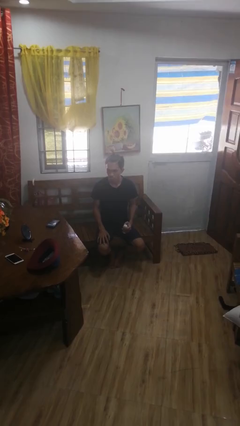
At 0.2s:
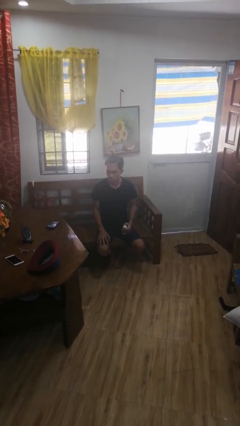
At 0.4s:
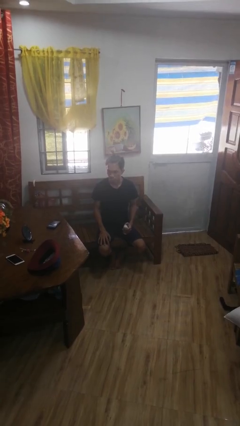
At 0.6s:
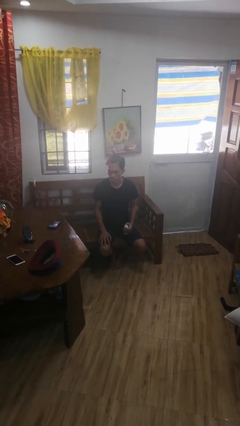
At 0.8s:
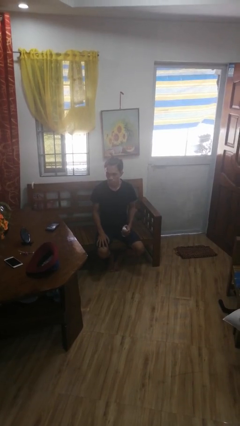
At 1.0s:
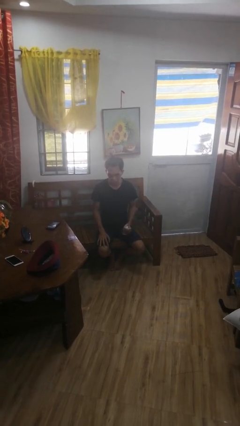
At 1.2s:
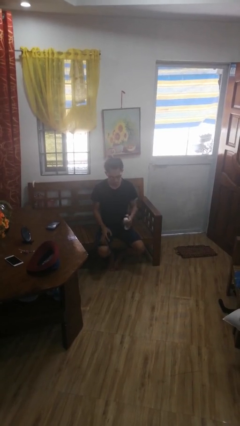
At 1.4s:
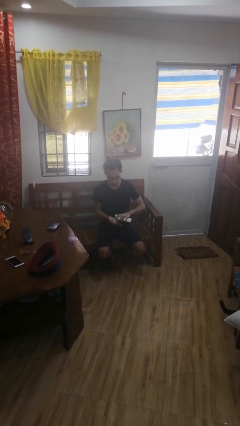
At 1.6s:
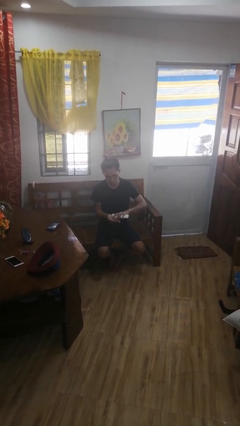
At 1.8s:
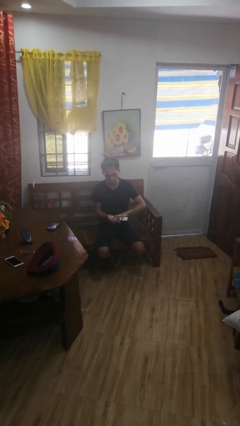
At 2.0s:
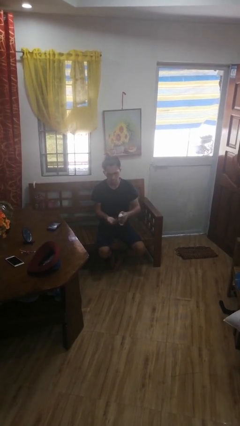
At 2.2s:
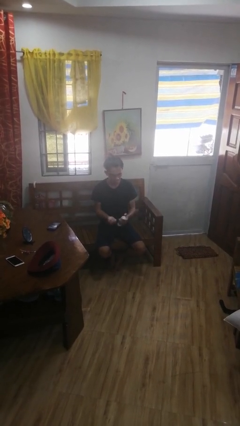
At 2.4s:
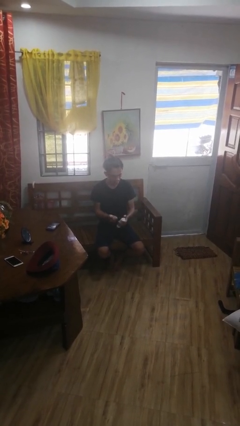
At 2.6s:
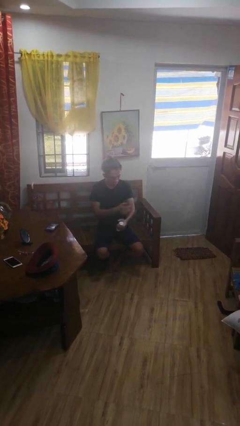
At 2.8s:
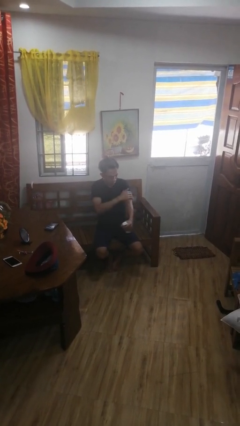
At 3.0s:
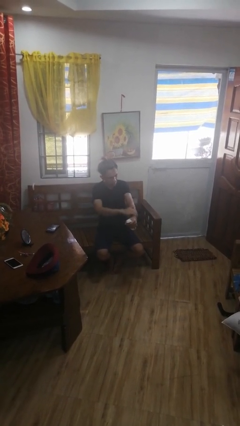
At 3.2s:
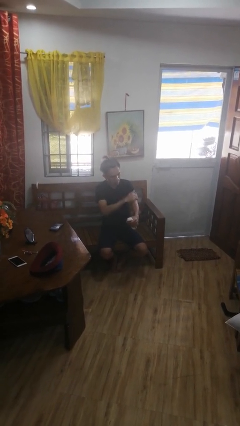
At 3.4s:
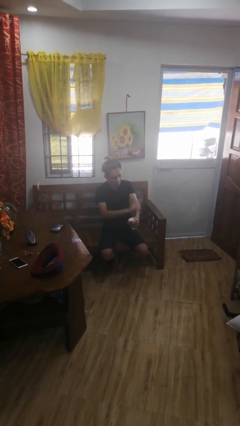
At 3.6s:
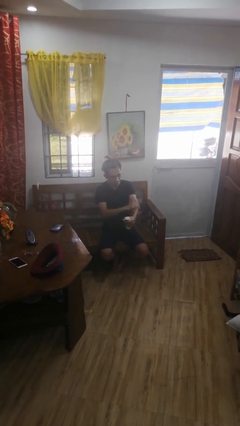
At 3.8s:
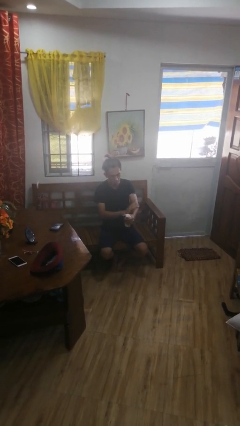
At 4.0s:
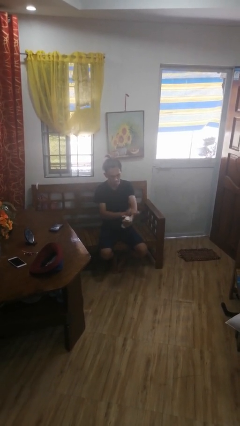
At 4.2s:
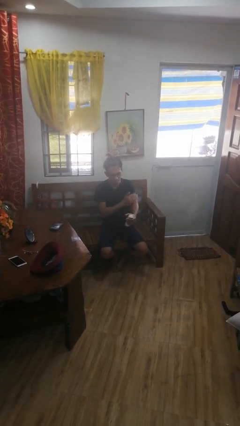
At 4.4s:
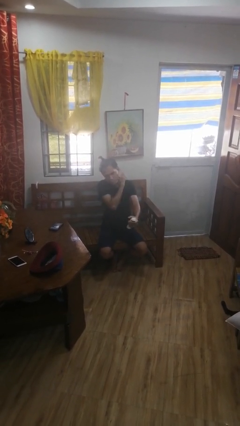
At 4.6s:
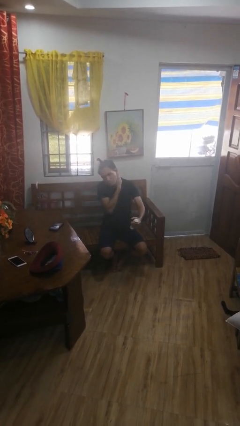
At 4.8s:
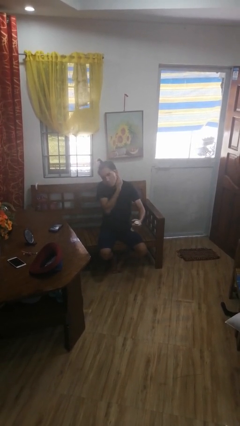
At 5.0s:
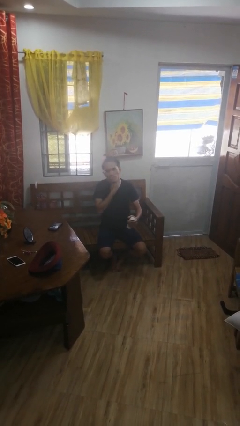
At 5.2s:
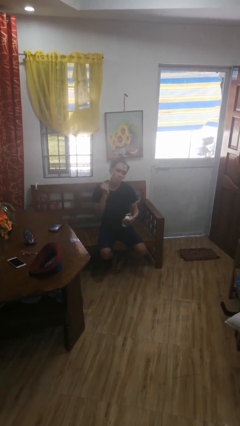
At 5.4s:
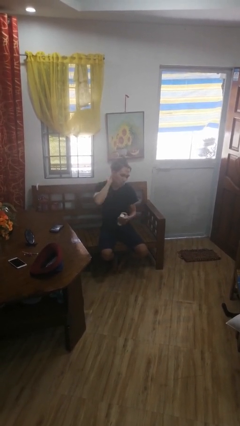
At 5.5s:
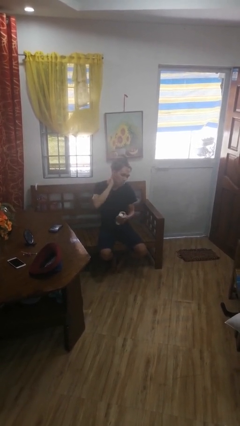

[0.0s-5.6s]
person applies sunscreen

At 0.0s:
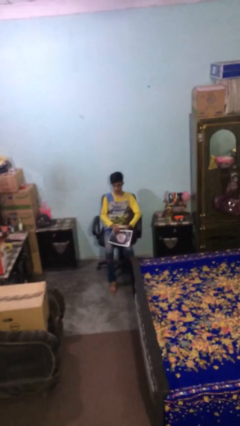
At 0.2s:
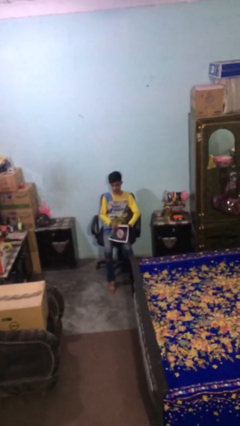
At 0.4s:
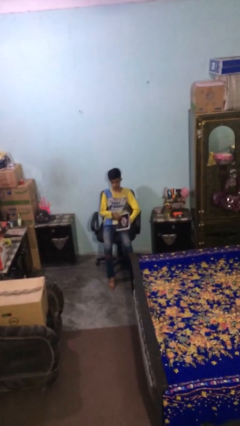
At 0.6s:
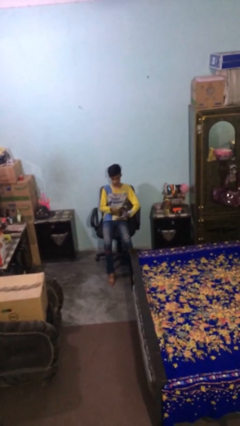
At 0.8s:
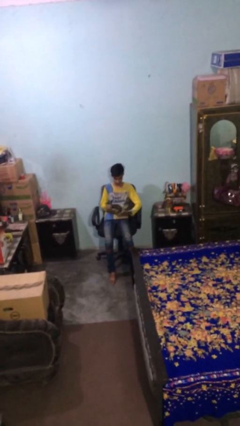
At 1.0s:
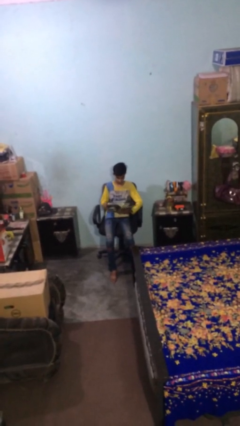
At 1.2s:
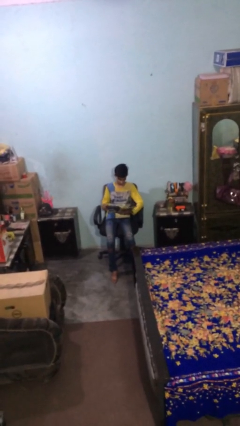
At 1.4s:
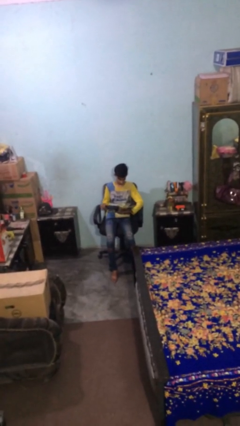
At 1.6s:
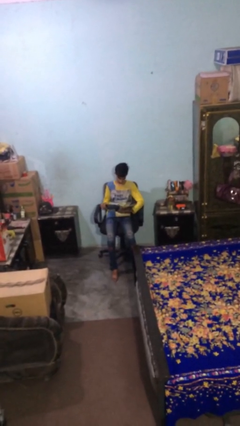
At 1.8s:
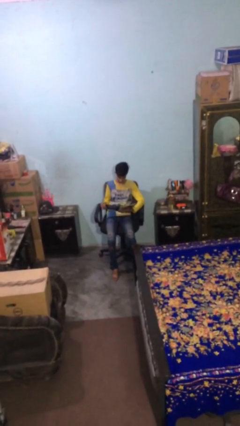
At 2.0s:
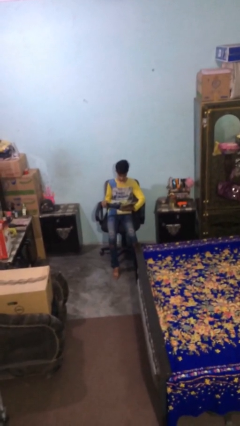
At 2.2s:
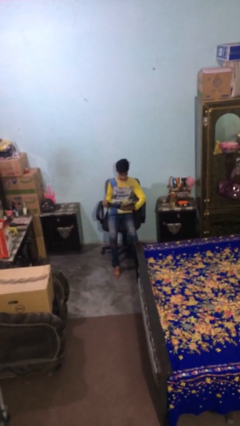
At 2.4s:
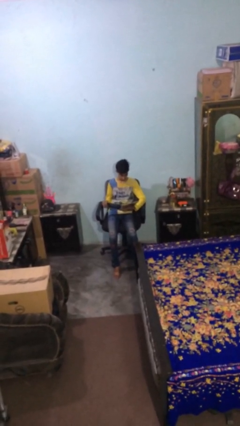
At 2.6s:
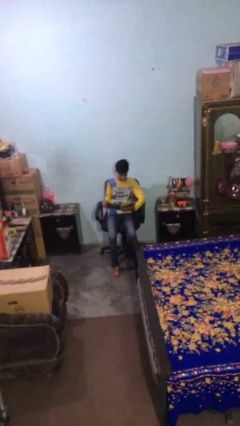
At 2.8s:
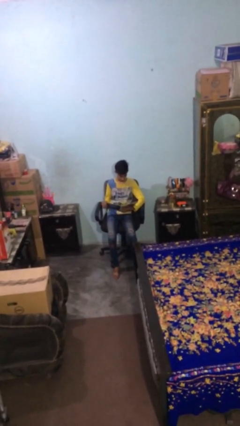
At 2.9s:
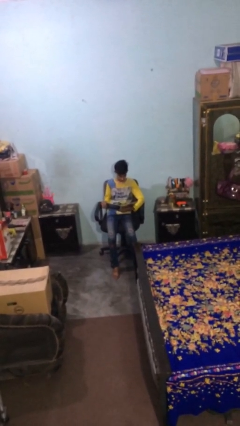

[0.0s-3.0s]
person reads document

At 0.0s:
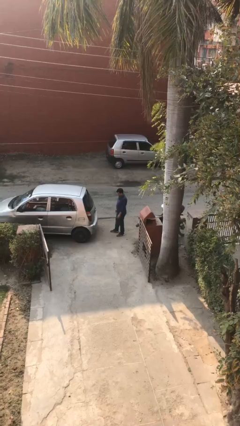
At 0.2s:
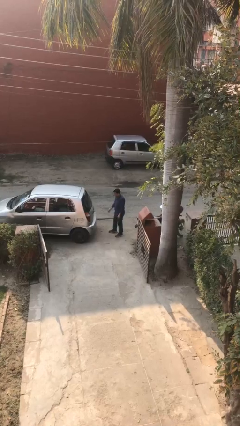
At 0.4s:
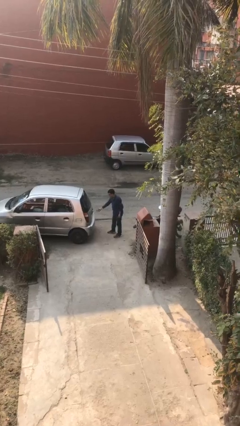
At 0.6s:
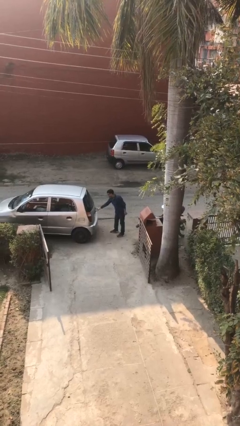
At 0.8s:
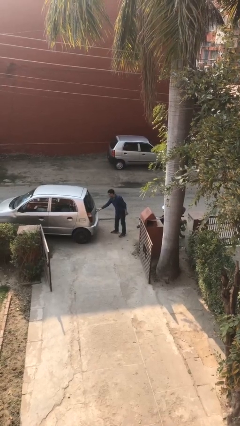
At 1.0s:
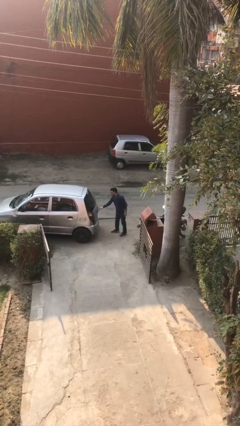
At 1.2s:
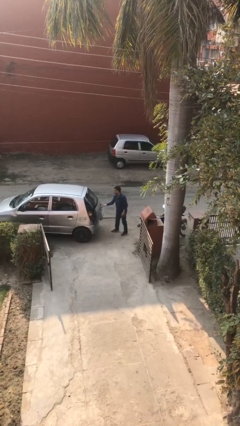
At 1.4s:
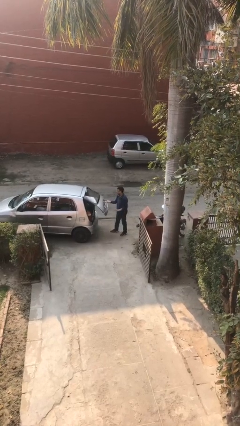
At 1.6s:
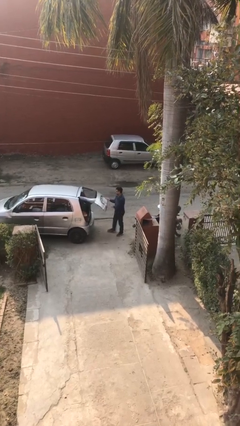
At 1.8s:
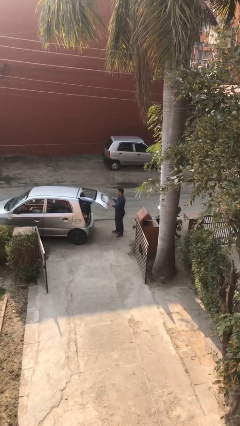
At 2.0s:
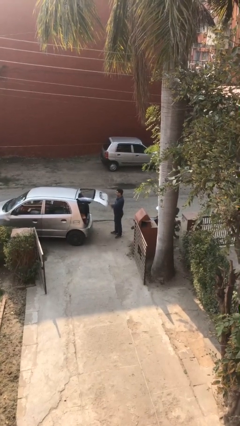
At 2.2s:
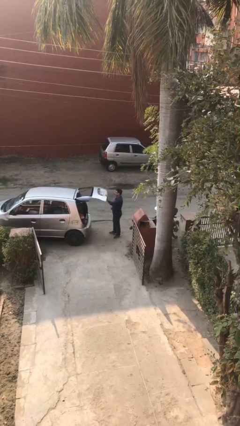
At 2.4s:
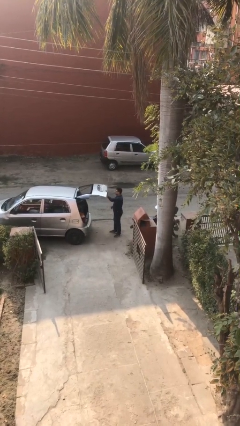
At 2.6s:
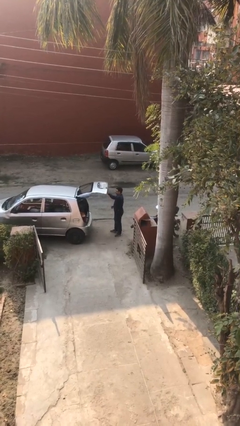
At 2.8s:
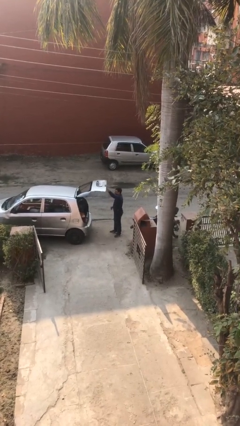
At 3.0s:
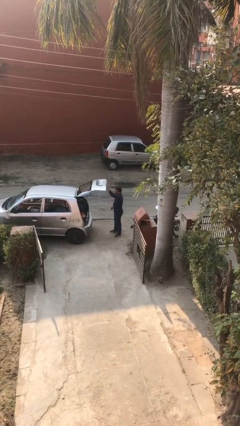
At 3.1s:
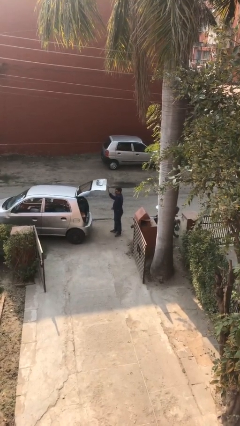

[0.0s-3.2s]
person opens car trunk

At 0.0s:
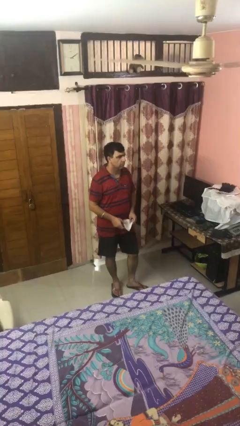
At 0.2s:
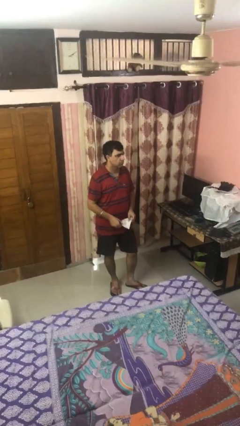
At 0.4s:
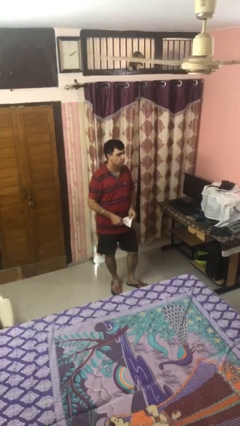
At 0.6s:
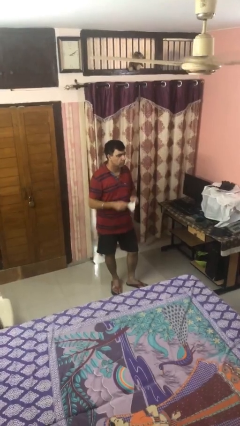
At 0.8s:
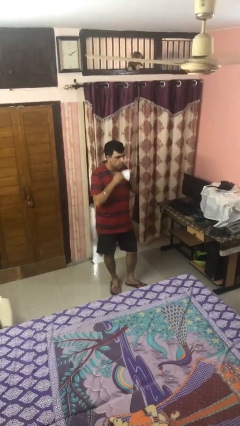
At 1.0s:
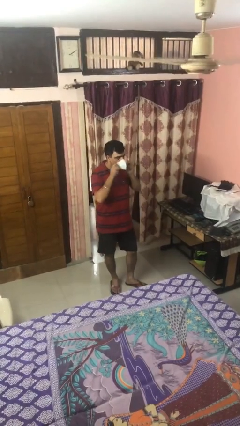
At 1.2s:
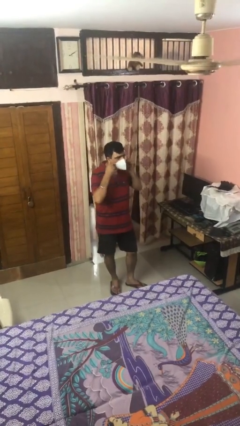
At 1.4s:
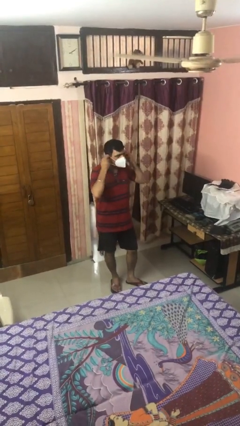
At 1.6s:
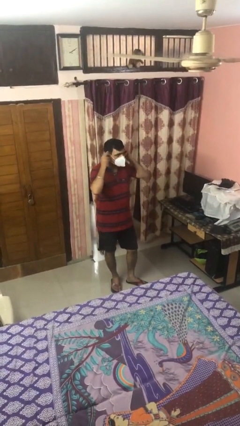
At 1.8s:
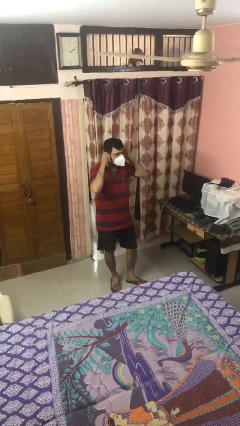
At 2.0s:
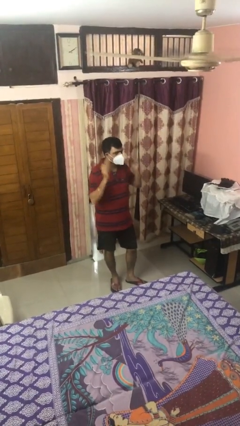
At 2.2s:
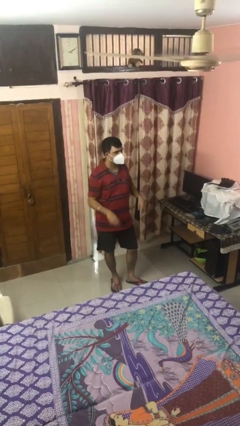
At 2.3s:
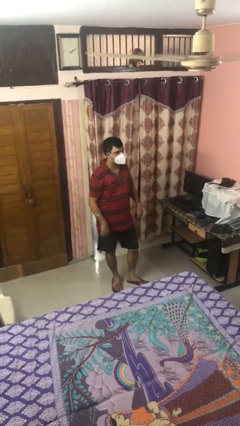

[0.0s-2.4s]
person puts on facemask

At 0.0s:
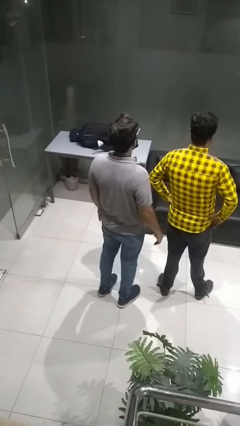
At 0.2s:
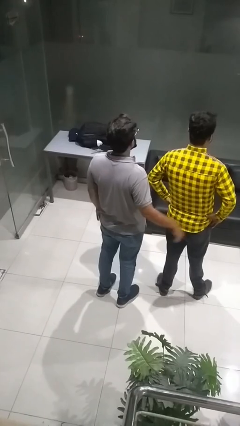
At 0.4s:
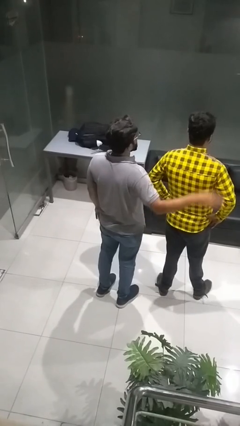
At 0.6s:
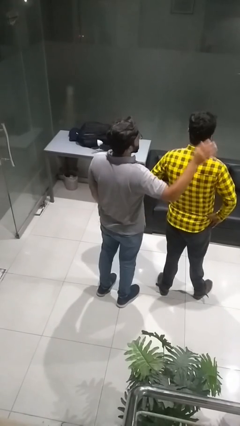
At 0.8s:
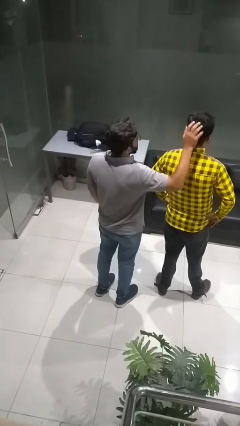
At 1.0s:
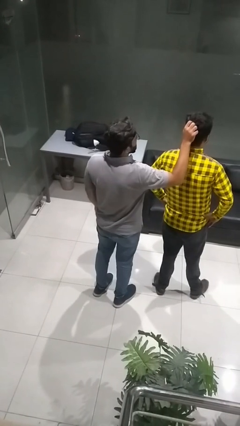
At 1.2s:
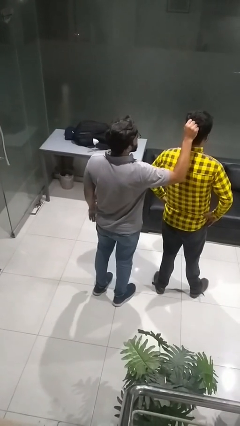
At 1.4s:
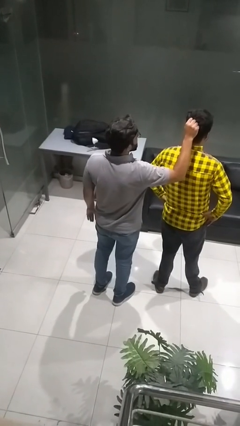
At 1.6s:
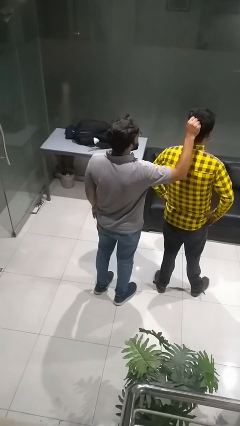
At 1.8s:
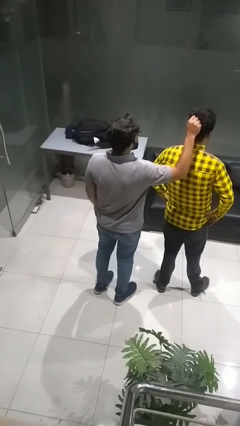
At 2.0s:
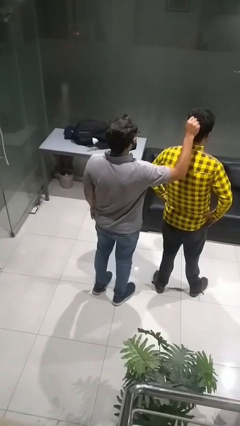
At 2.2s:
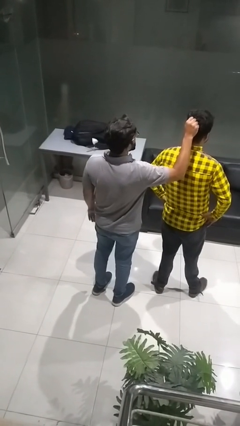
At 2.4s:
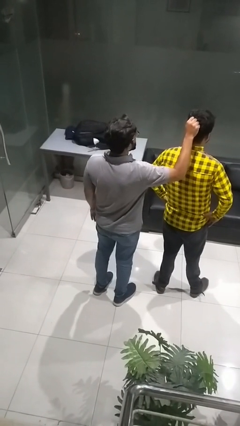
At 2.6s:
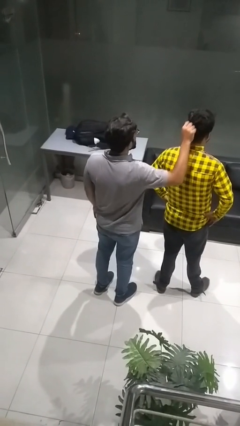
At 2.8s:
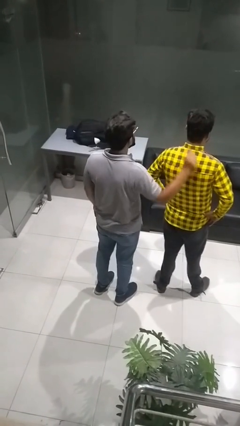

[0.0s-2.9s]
person grabs person by hair

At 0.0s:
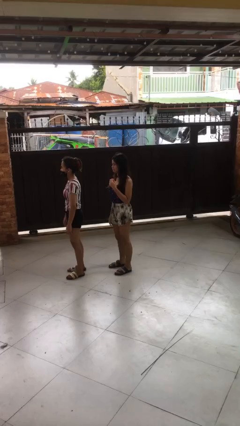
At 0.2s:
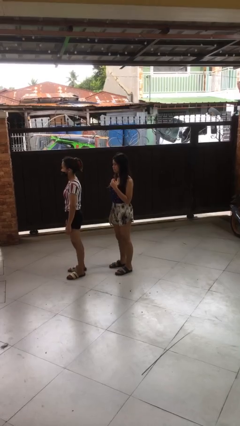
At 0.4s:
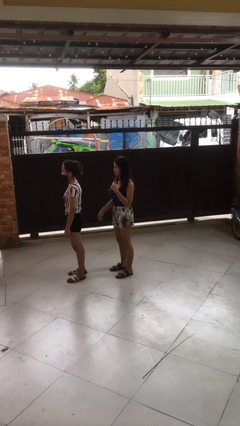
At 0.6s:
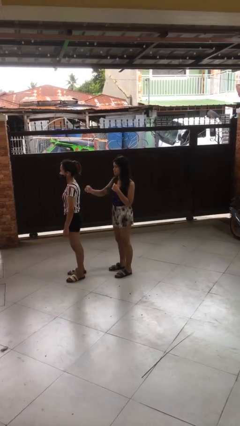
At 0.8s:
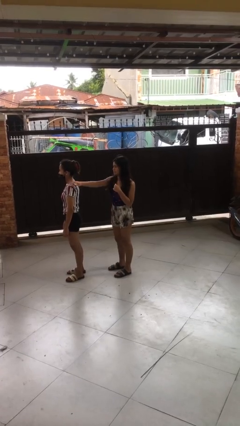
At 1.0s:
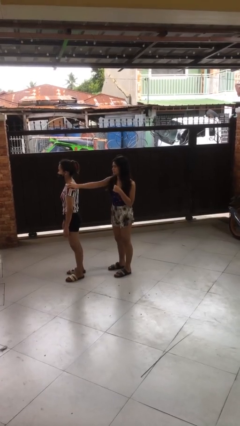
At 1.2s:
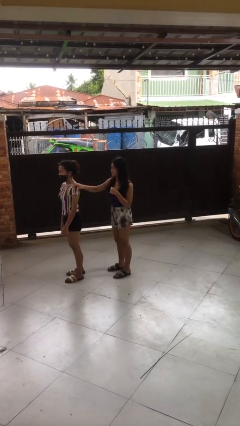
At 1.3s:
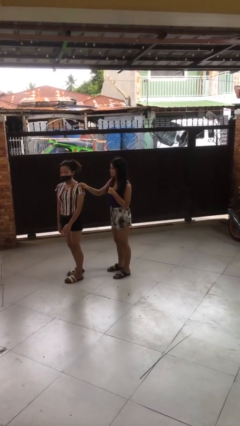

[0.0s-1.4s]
person grabs person by shoulder
